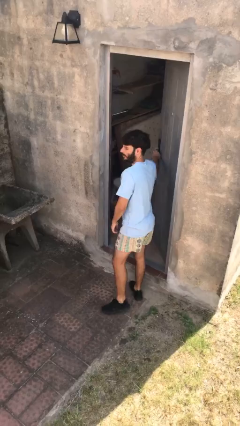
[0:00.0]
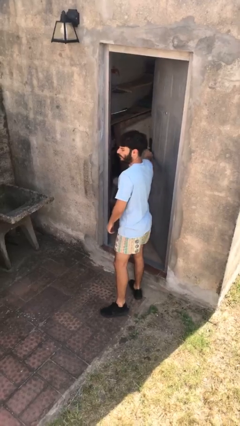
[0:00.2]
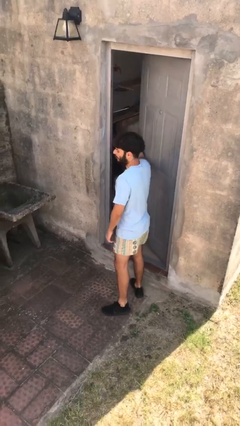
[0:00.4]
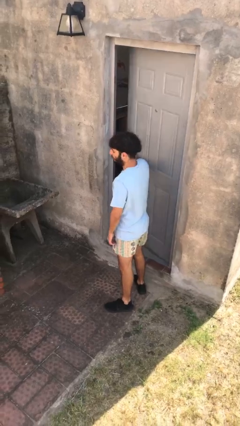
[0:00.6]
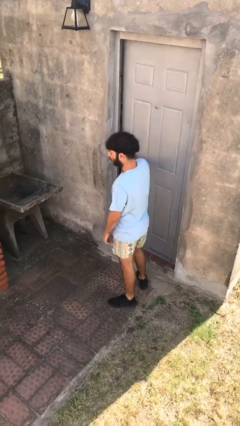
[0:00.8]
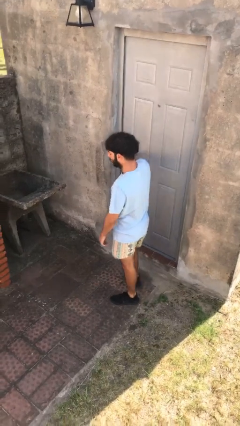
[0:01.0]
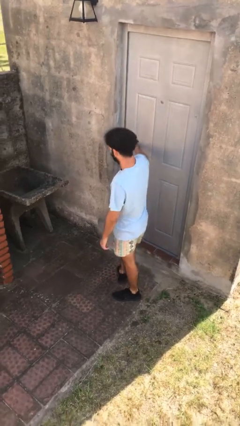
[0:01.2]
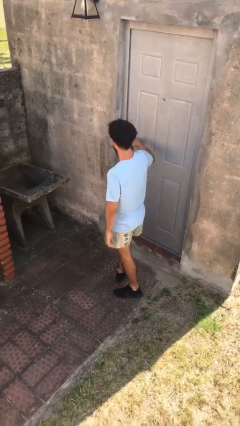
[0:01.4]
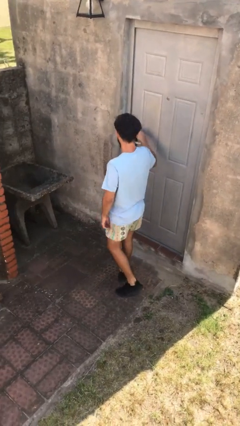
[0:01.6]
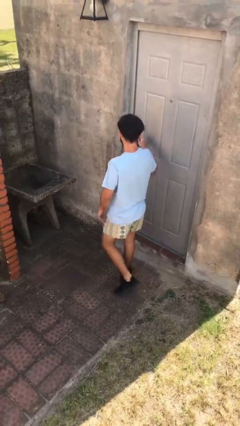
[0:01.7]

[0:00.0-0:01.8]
person closes facility door

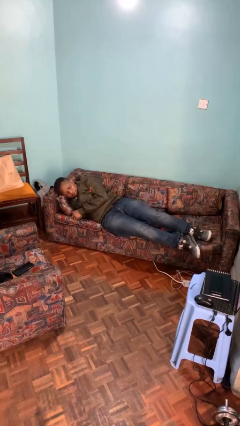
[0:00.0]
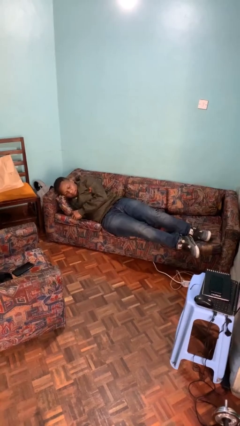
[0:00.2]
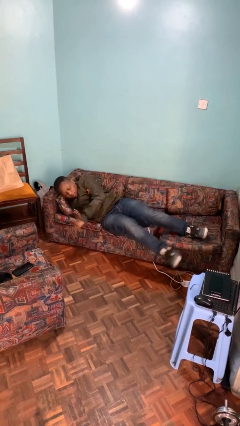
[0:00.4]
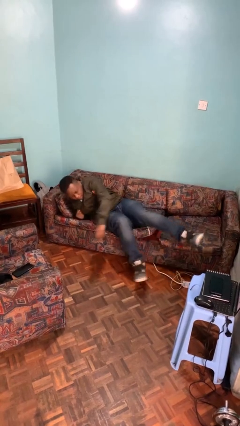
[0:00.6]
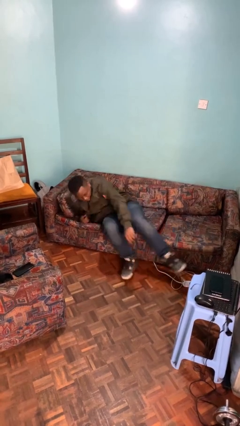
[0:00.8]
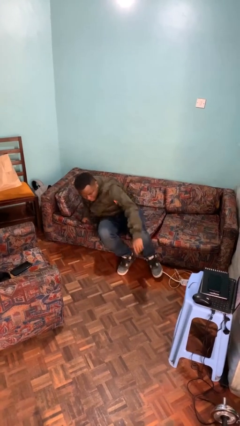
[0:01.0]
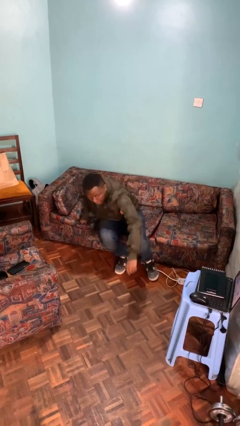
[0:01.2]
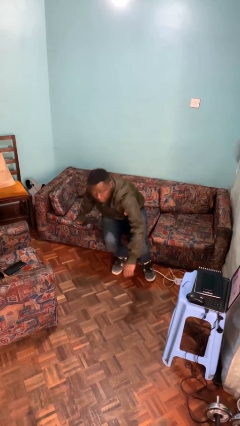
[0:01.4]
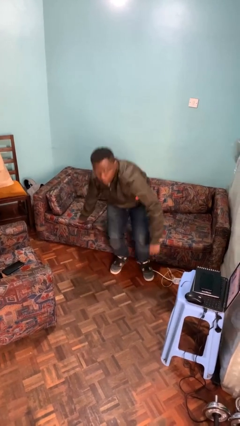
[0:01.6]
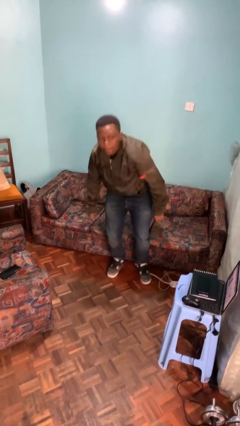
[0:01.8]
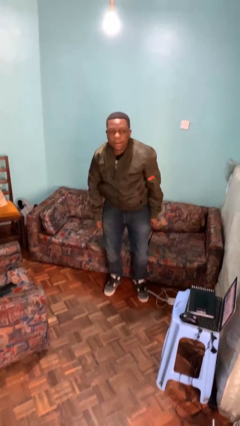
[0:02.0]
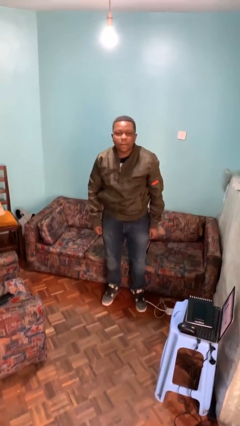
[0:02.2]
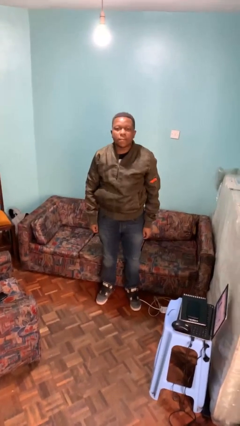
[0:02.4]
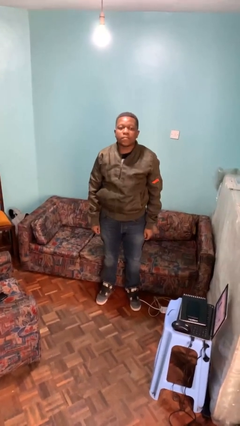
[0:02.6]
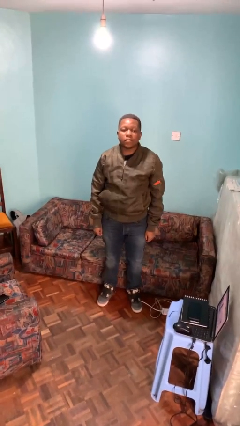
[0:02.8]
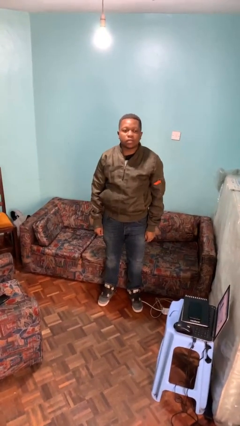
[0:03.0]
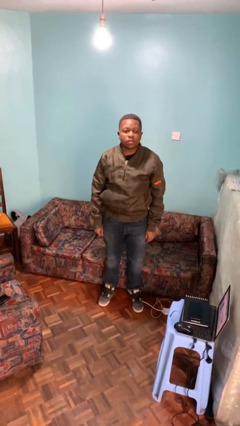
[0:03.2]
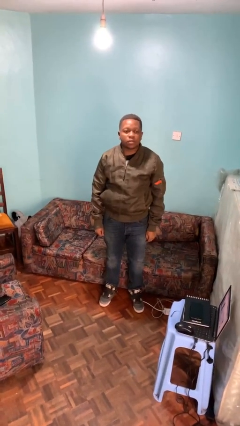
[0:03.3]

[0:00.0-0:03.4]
person stands up

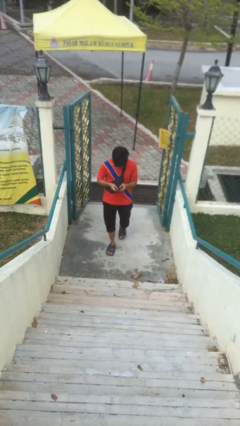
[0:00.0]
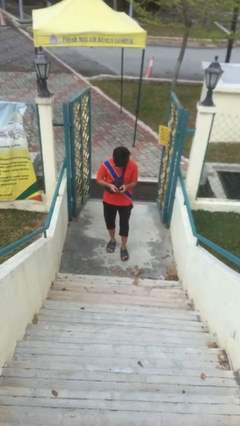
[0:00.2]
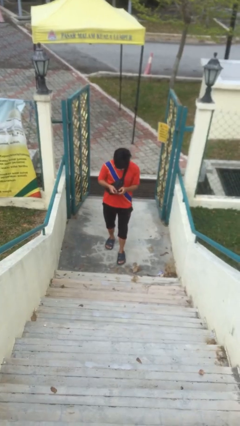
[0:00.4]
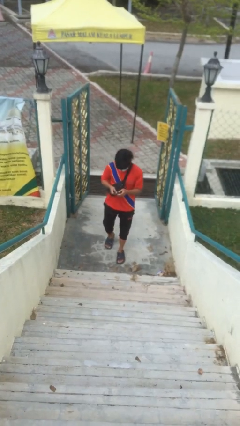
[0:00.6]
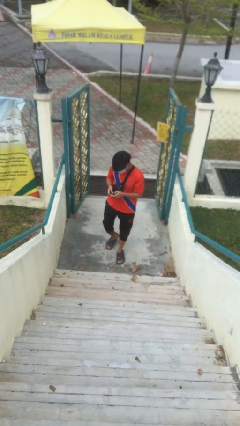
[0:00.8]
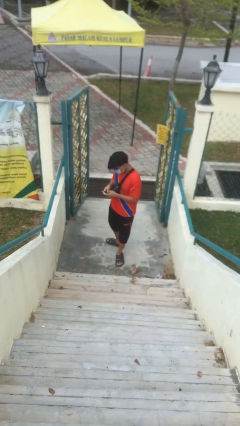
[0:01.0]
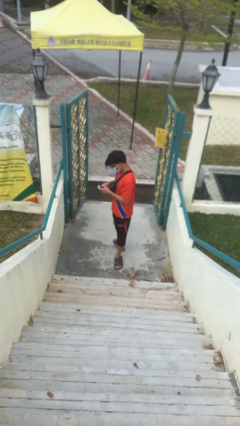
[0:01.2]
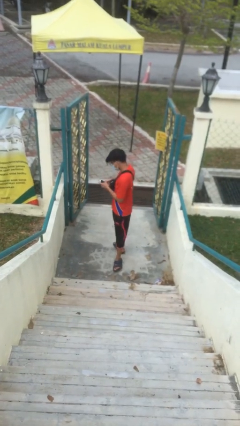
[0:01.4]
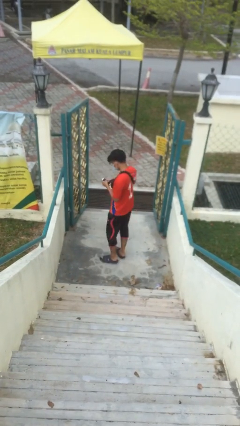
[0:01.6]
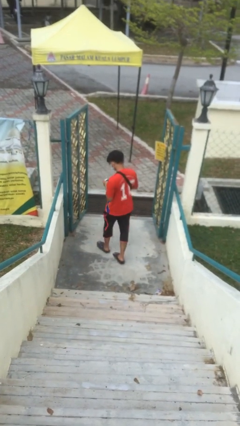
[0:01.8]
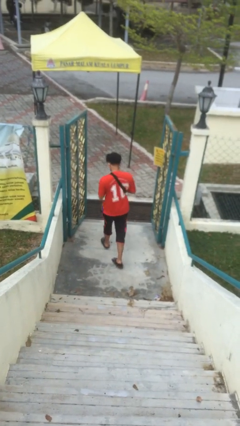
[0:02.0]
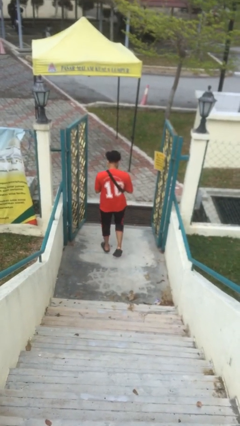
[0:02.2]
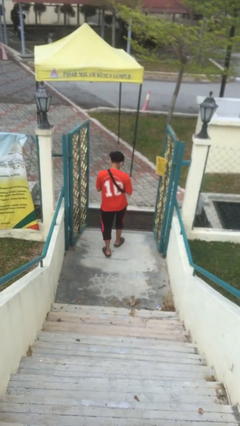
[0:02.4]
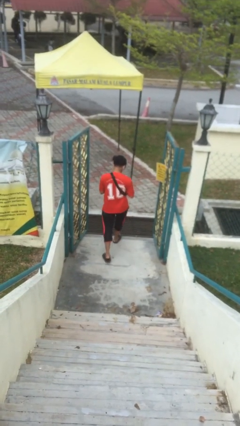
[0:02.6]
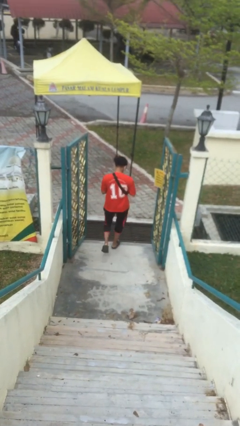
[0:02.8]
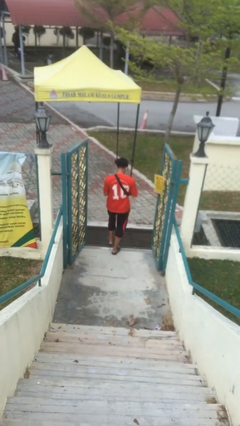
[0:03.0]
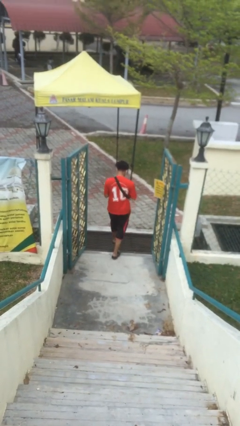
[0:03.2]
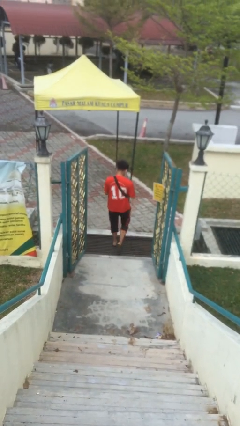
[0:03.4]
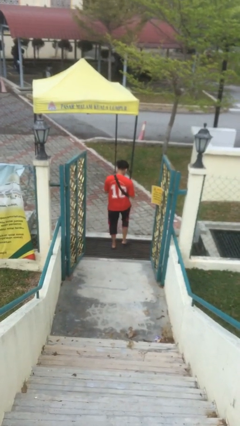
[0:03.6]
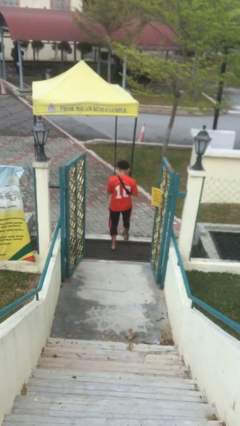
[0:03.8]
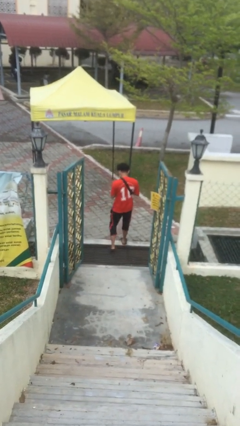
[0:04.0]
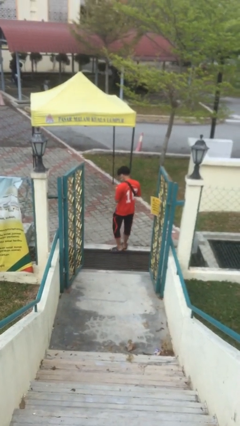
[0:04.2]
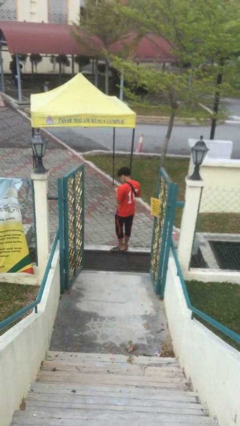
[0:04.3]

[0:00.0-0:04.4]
person exits scene through structure

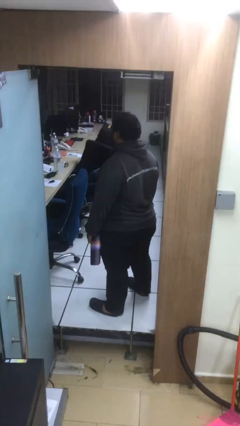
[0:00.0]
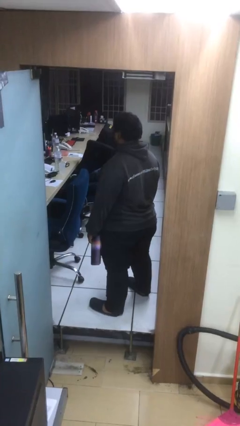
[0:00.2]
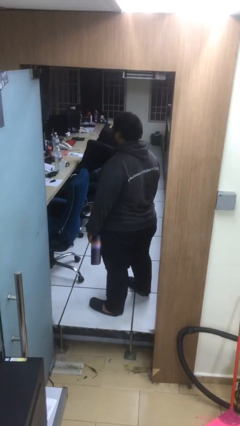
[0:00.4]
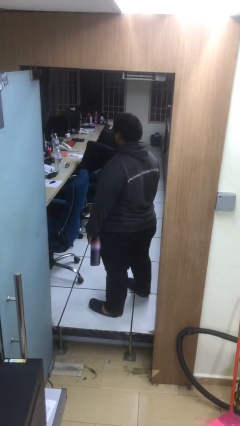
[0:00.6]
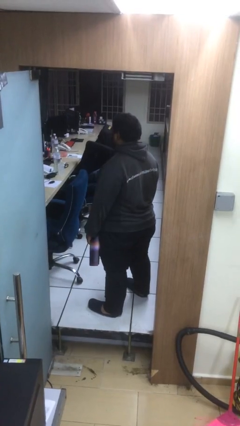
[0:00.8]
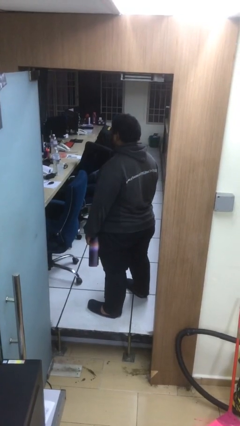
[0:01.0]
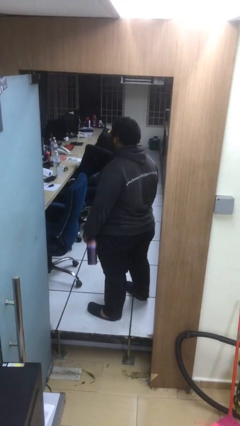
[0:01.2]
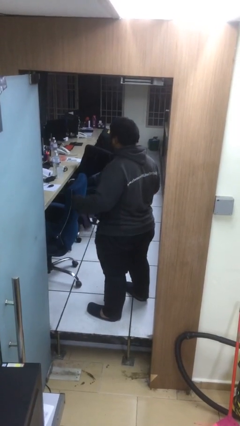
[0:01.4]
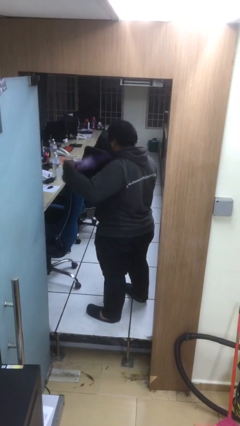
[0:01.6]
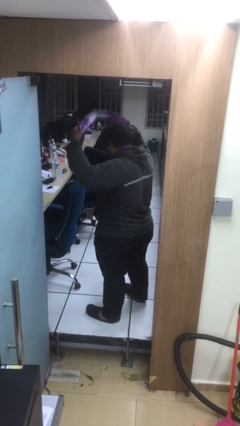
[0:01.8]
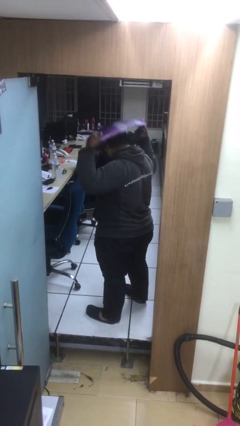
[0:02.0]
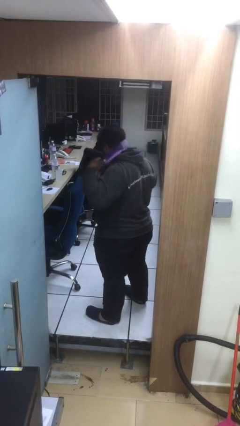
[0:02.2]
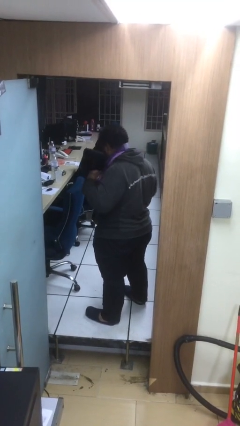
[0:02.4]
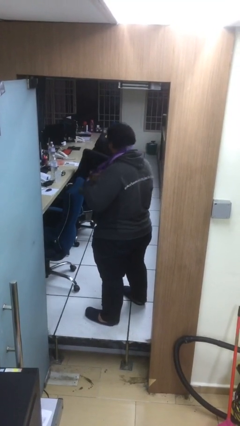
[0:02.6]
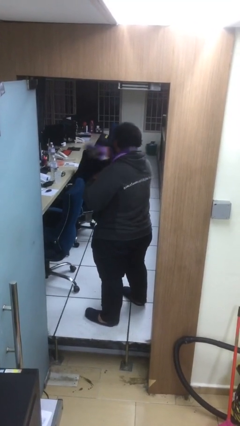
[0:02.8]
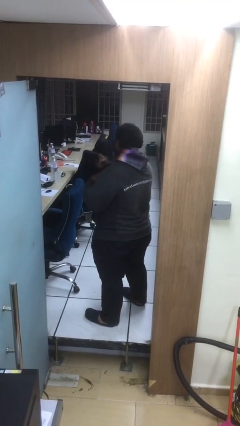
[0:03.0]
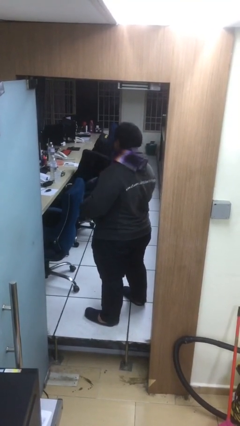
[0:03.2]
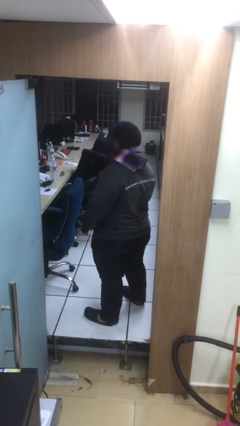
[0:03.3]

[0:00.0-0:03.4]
person puts on scarf

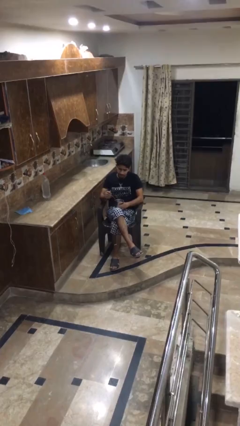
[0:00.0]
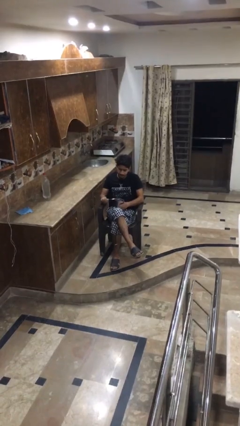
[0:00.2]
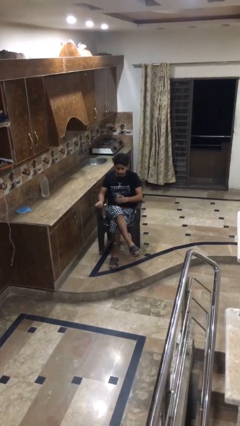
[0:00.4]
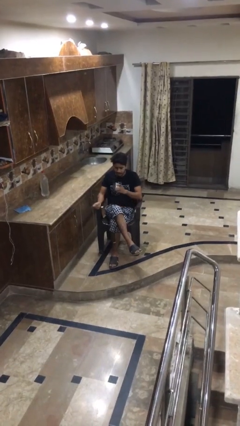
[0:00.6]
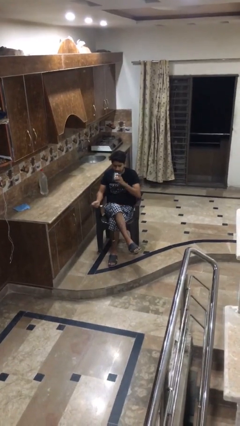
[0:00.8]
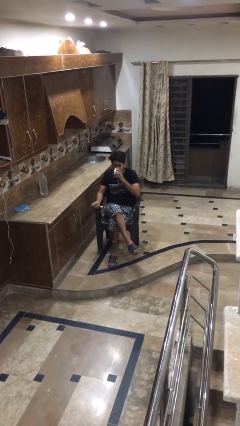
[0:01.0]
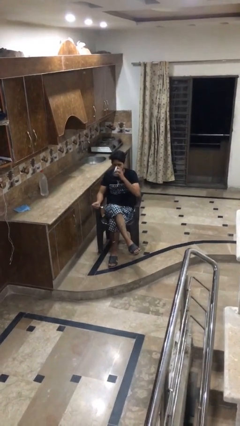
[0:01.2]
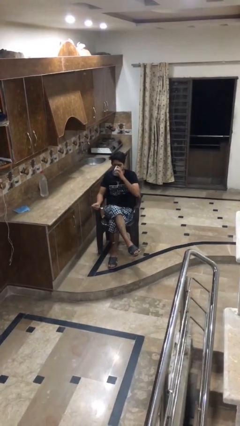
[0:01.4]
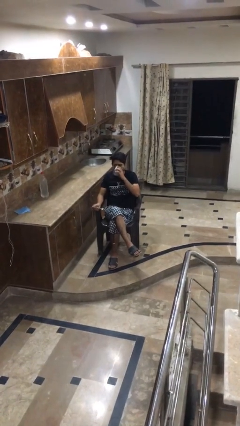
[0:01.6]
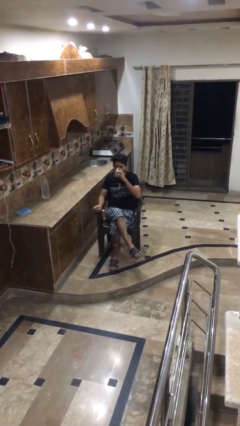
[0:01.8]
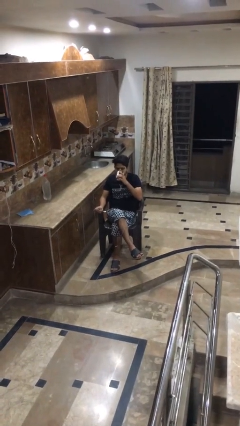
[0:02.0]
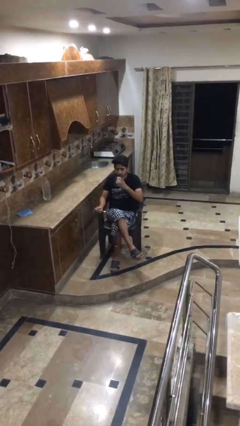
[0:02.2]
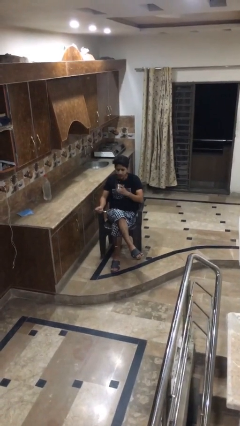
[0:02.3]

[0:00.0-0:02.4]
person drinks from mug

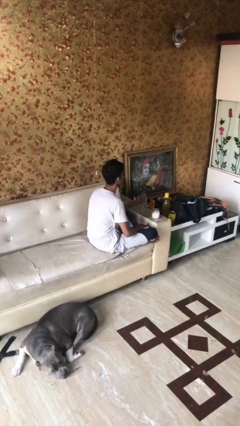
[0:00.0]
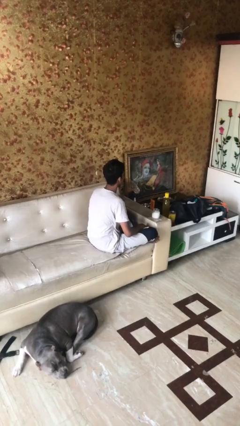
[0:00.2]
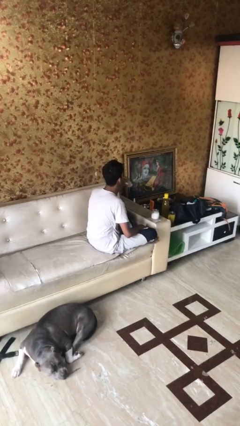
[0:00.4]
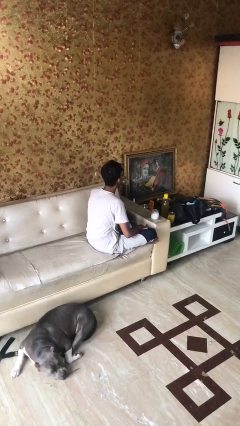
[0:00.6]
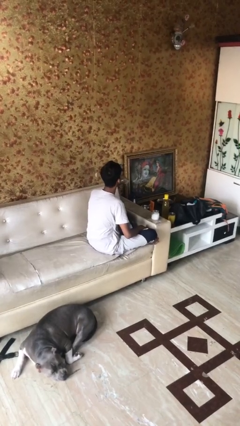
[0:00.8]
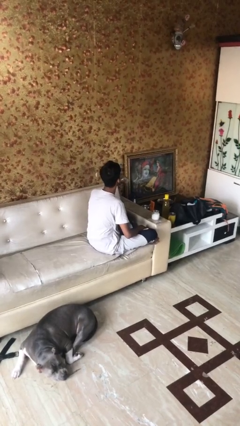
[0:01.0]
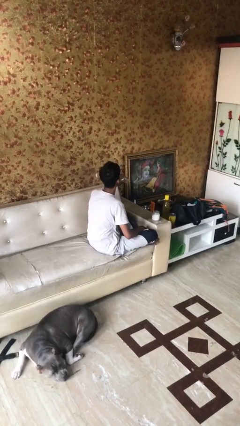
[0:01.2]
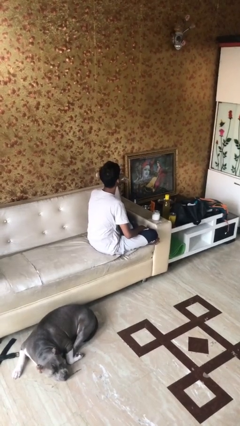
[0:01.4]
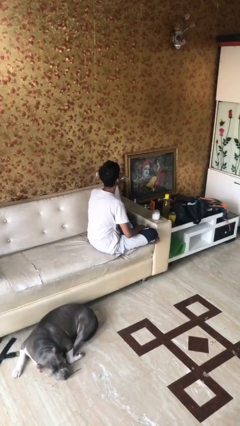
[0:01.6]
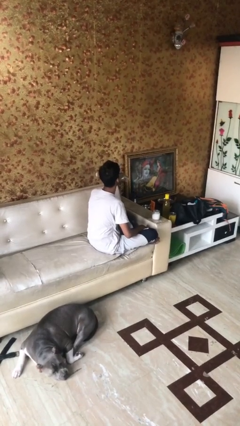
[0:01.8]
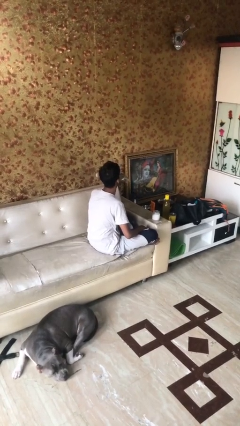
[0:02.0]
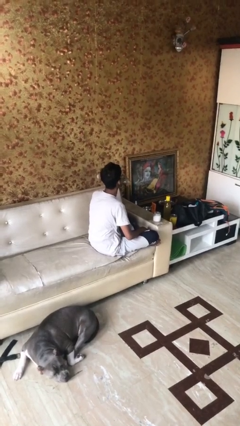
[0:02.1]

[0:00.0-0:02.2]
person drinks from cup
